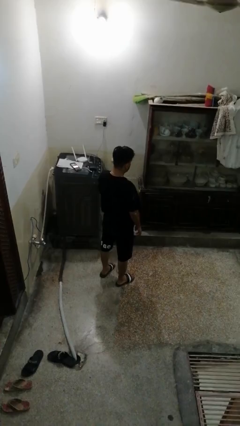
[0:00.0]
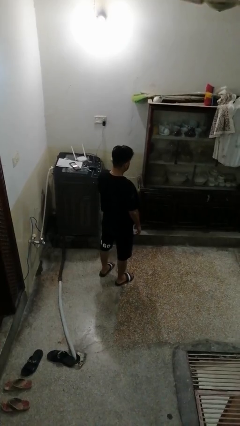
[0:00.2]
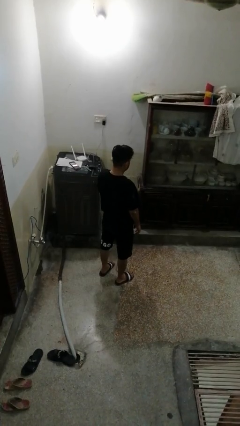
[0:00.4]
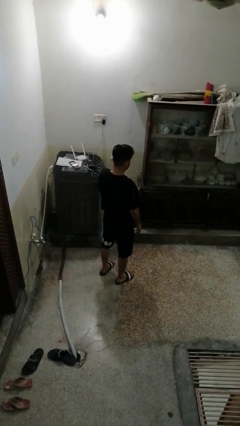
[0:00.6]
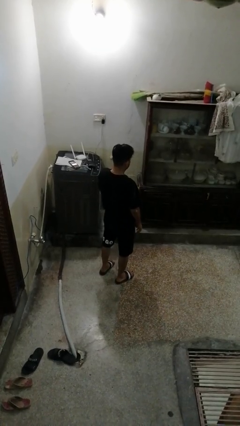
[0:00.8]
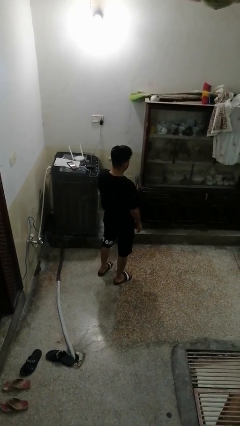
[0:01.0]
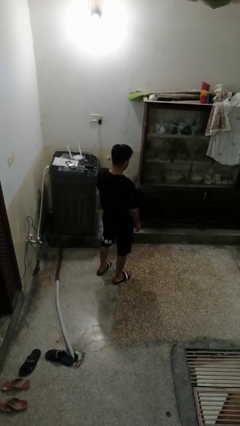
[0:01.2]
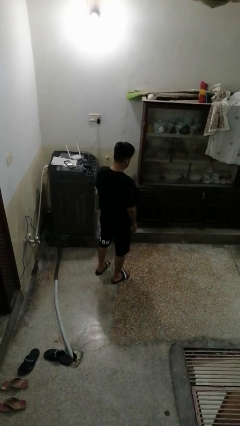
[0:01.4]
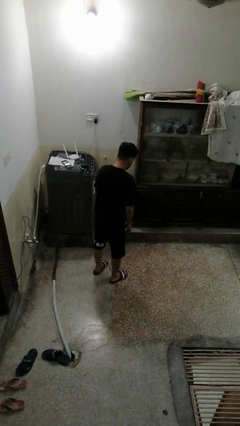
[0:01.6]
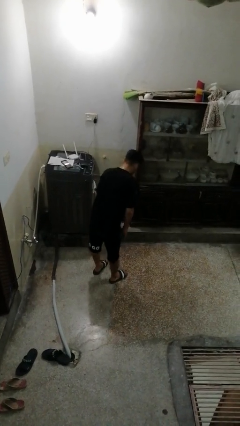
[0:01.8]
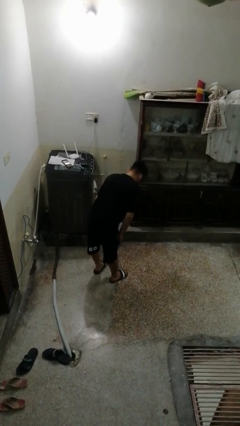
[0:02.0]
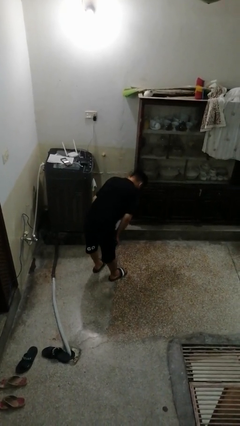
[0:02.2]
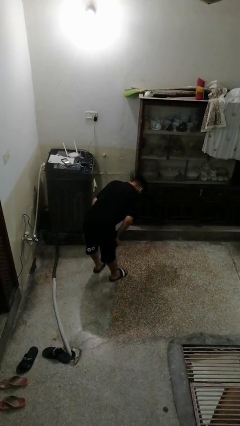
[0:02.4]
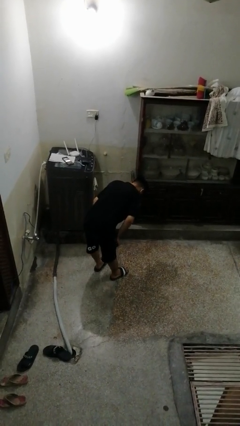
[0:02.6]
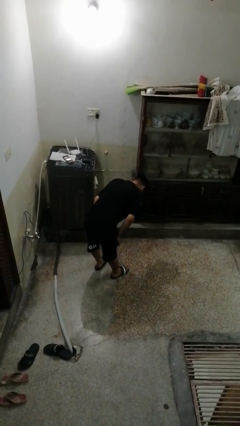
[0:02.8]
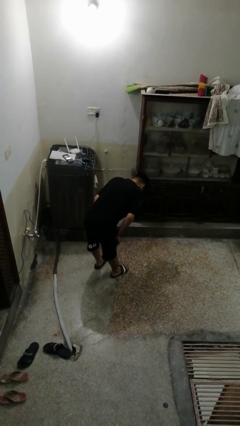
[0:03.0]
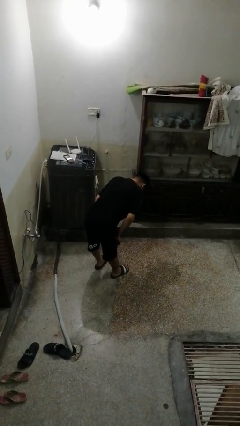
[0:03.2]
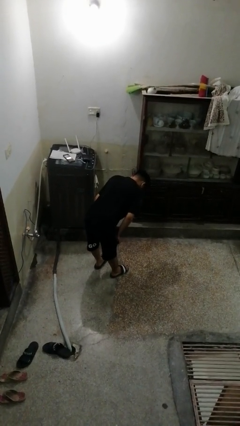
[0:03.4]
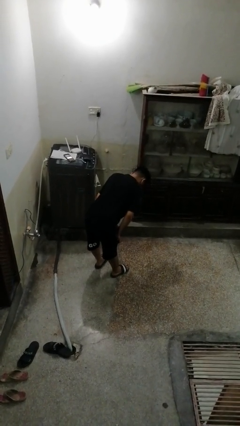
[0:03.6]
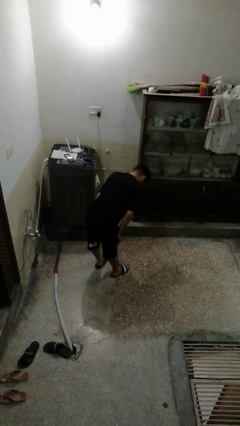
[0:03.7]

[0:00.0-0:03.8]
person bows

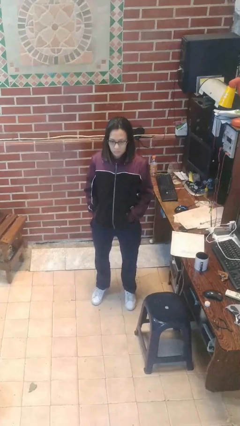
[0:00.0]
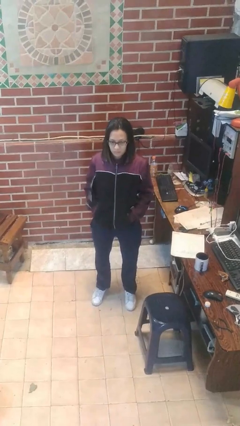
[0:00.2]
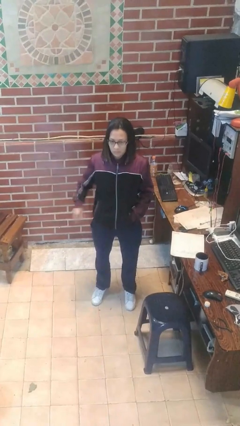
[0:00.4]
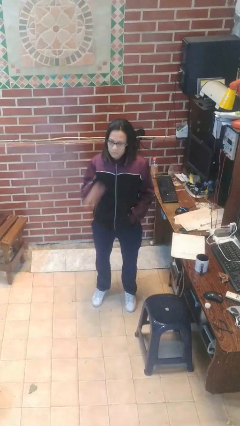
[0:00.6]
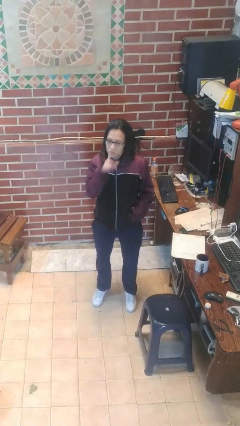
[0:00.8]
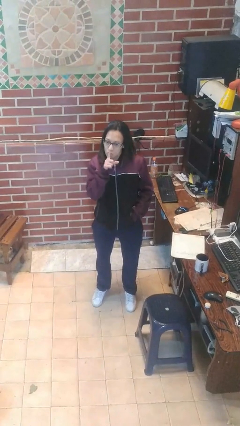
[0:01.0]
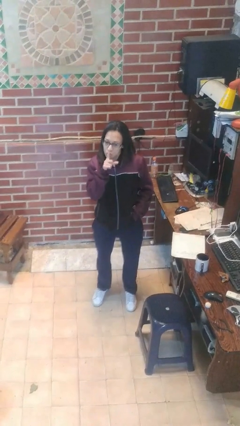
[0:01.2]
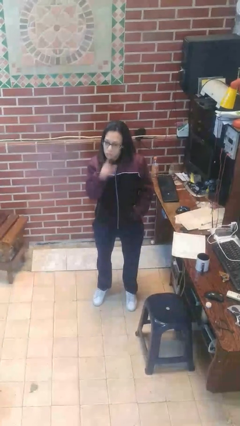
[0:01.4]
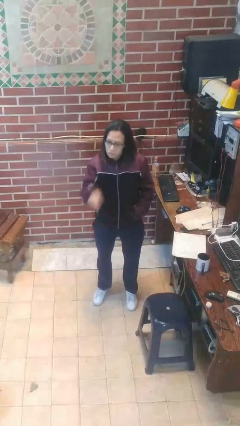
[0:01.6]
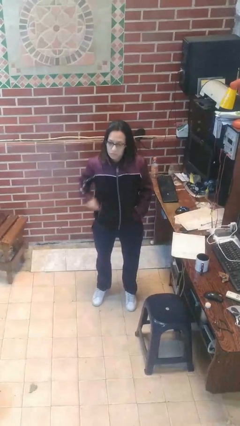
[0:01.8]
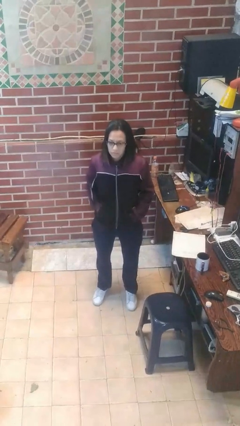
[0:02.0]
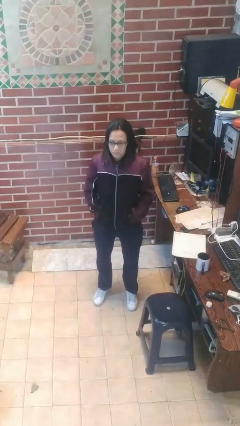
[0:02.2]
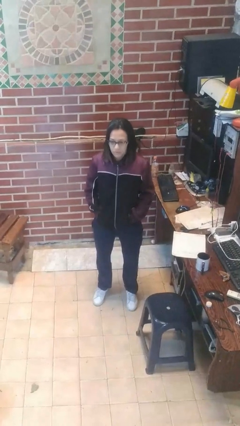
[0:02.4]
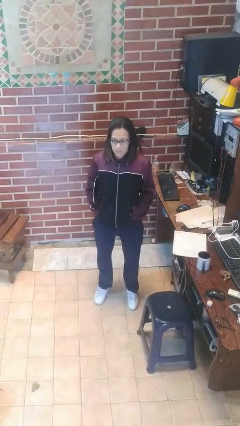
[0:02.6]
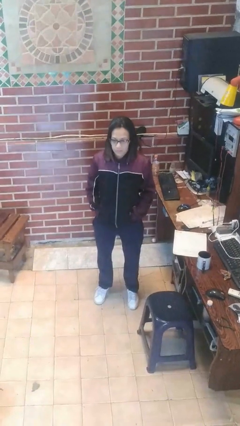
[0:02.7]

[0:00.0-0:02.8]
person gestures be quiet

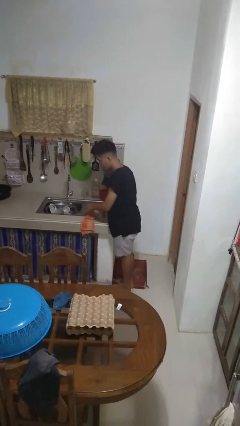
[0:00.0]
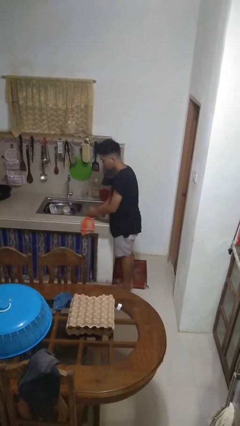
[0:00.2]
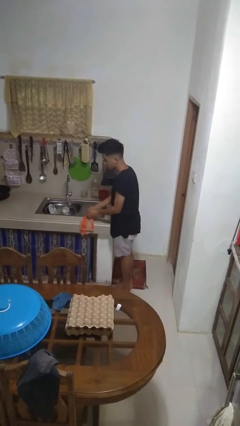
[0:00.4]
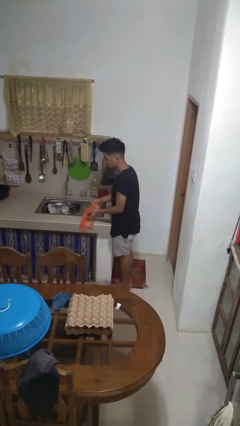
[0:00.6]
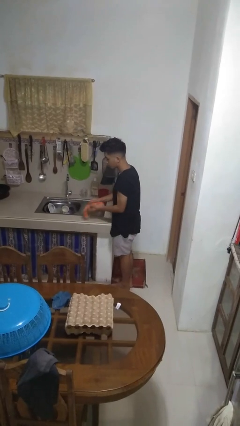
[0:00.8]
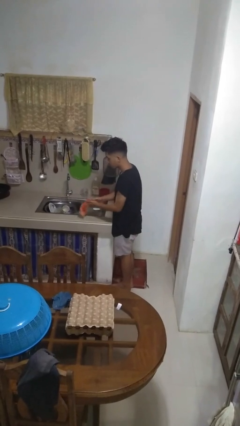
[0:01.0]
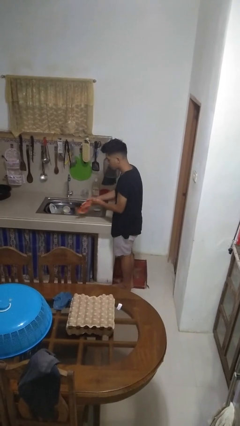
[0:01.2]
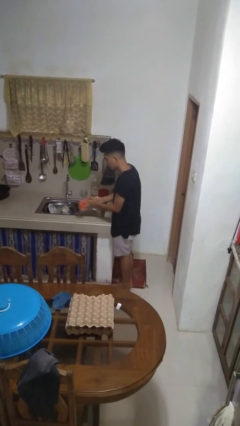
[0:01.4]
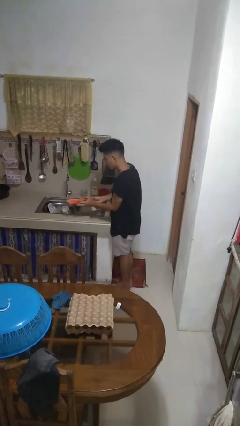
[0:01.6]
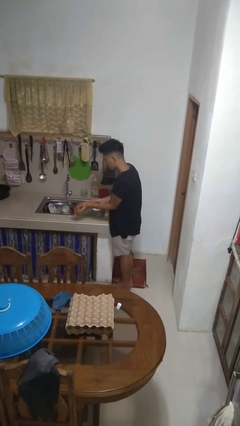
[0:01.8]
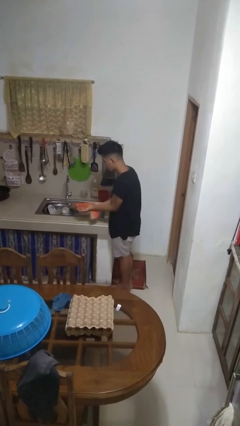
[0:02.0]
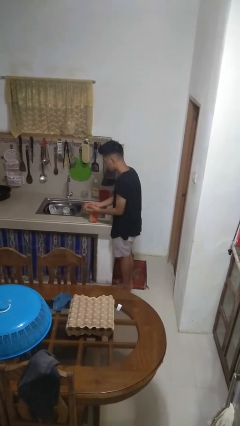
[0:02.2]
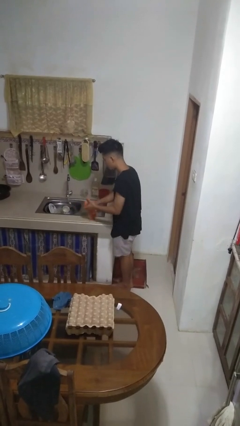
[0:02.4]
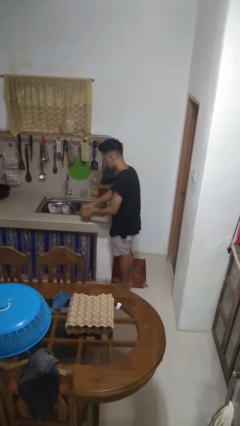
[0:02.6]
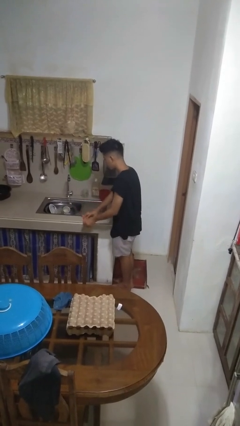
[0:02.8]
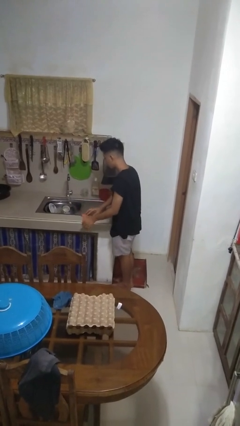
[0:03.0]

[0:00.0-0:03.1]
person dries hands with towel

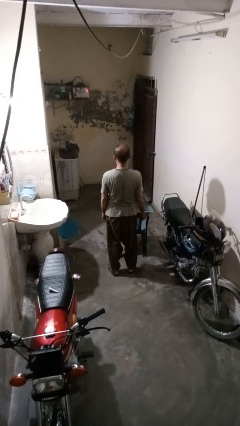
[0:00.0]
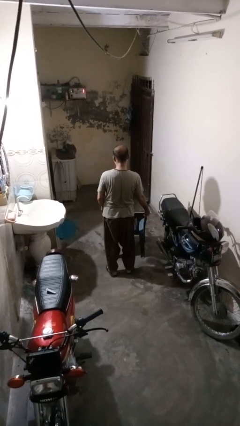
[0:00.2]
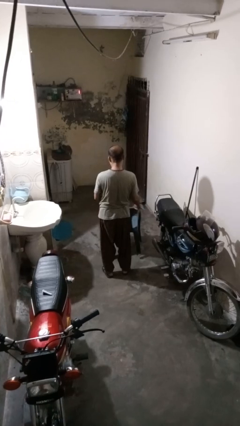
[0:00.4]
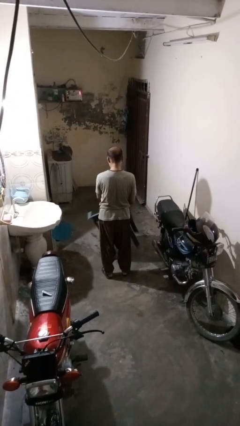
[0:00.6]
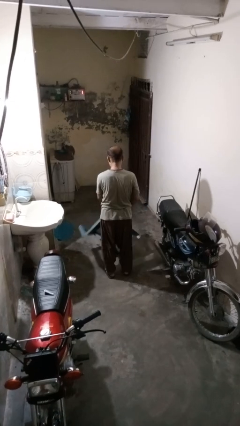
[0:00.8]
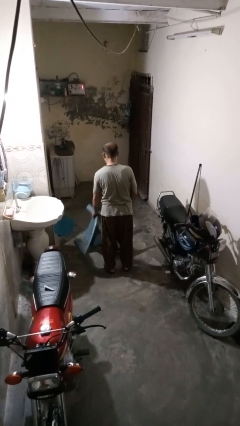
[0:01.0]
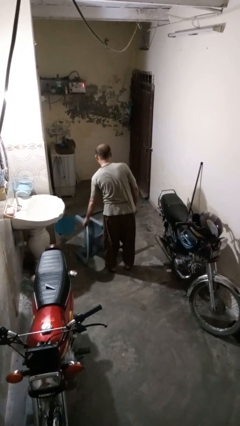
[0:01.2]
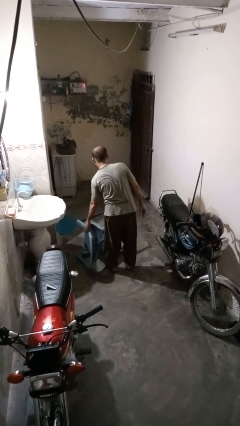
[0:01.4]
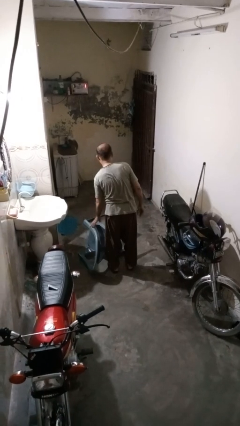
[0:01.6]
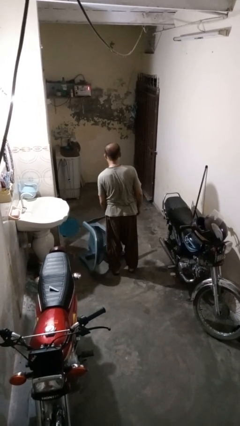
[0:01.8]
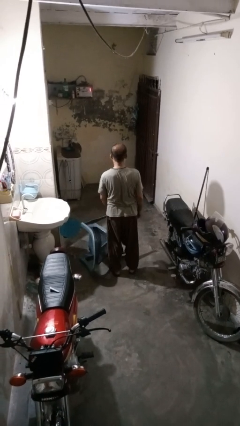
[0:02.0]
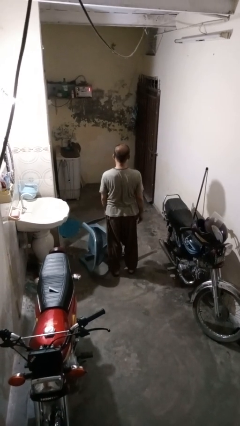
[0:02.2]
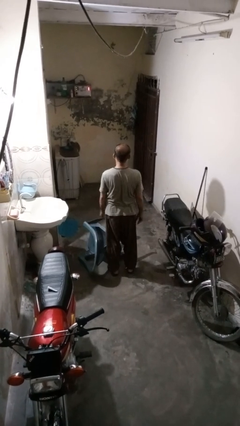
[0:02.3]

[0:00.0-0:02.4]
person knocks over furniture

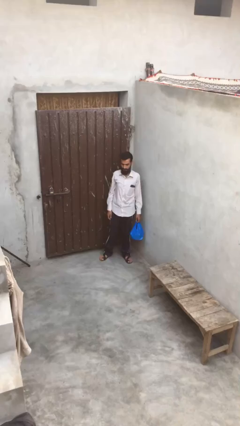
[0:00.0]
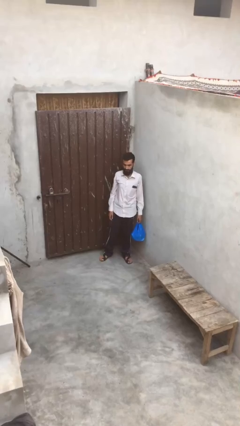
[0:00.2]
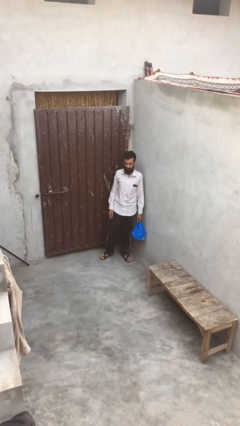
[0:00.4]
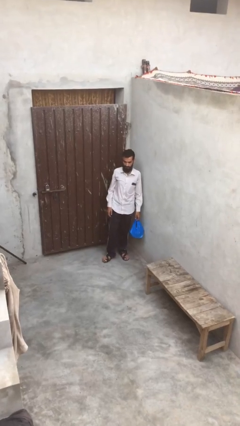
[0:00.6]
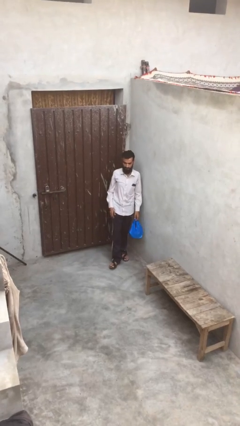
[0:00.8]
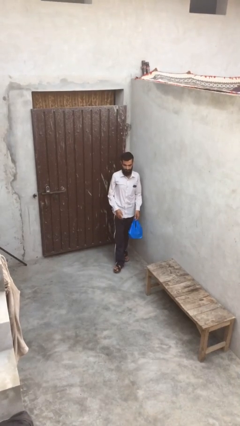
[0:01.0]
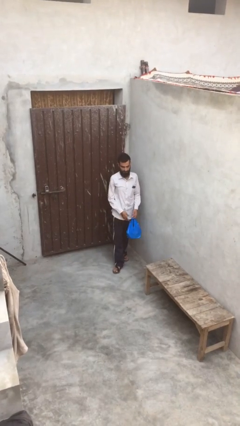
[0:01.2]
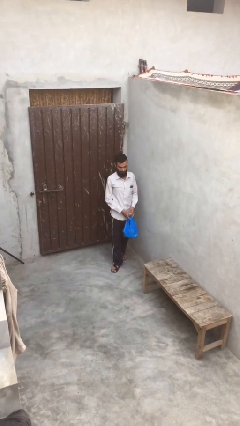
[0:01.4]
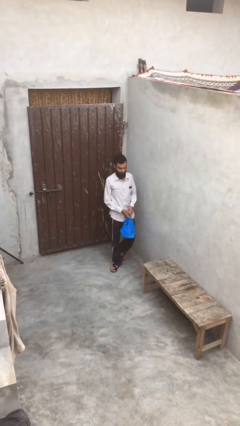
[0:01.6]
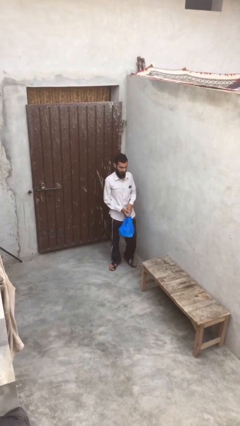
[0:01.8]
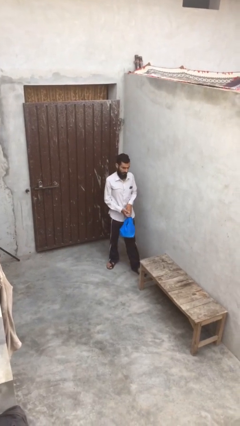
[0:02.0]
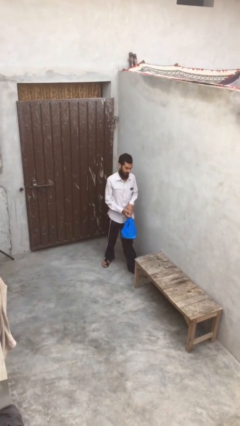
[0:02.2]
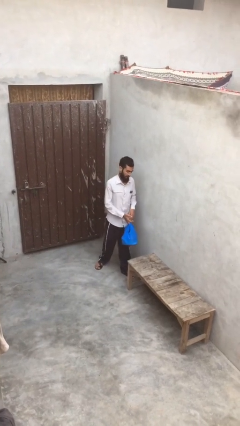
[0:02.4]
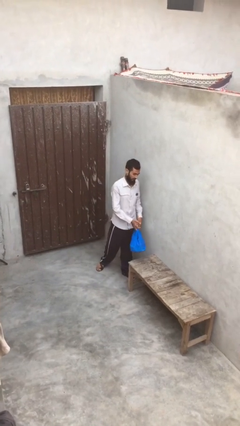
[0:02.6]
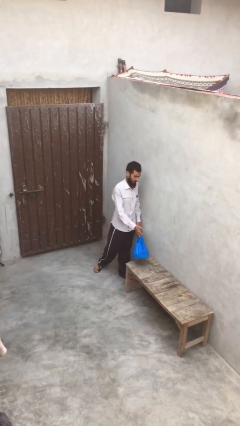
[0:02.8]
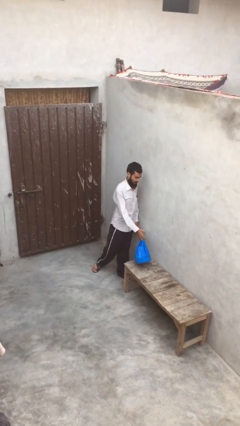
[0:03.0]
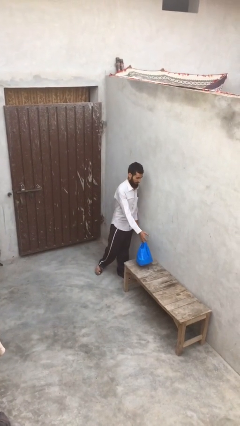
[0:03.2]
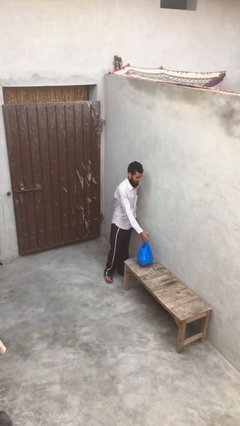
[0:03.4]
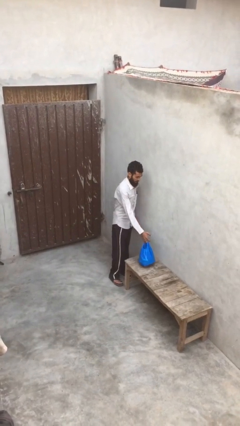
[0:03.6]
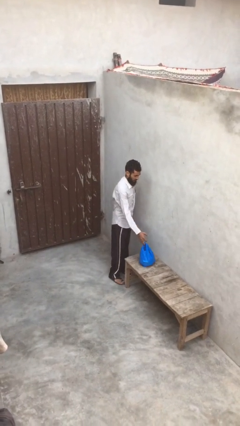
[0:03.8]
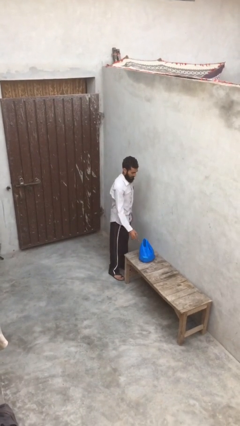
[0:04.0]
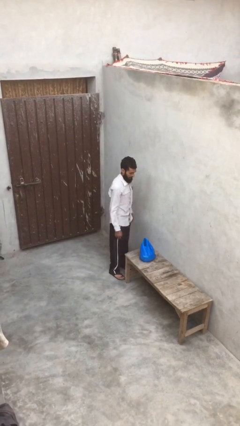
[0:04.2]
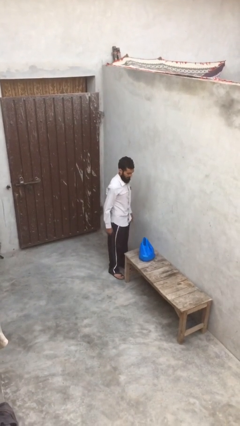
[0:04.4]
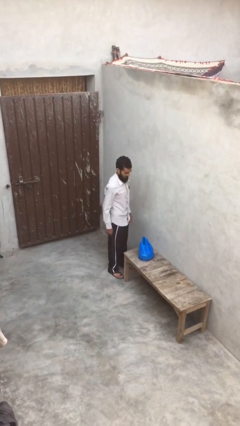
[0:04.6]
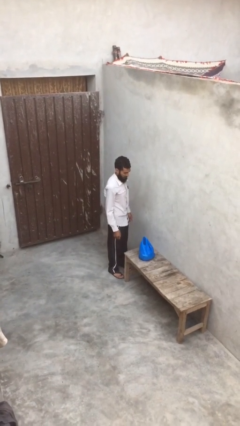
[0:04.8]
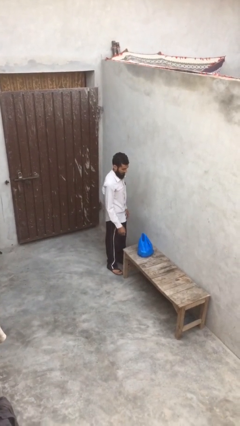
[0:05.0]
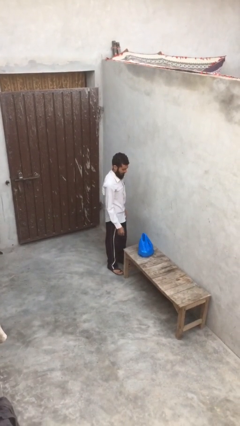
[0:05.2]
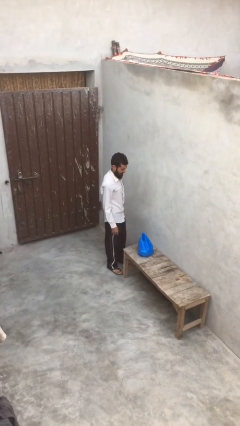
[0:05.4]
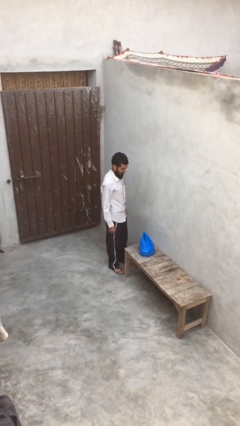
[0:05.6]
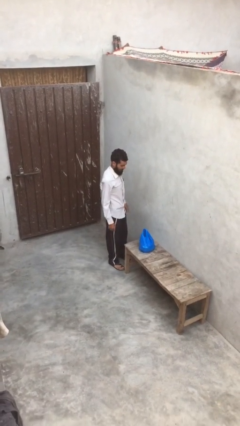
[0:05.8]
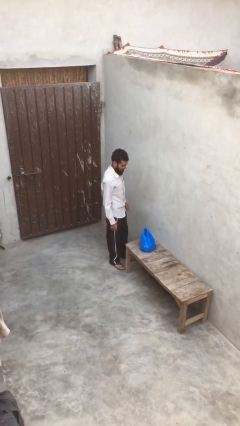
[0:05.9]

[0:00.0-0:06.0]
person puts down object on table
